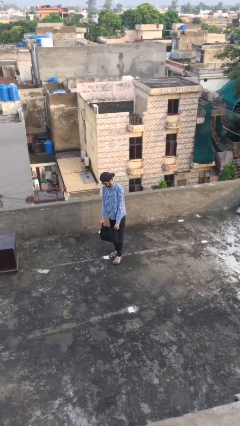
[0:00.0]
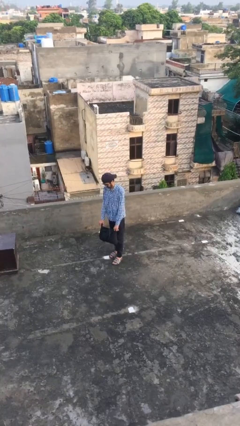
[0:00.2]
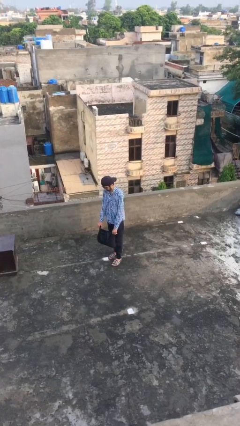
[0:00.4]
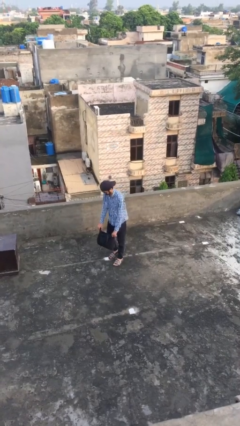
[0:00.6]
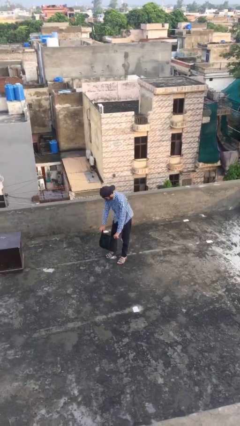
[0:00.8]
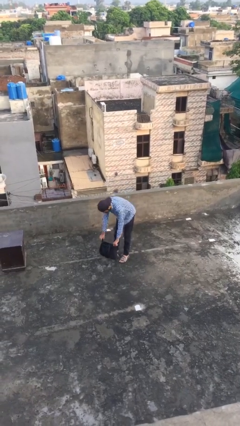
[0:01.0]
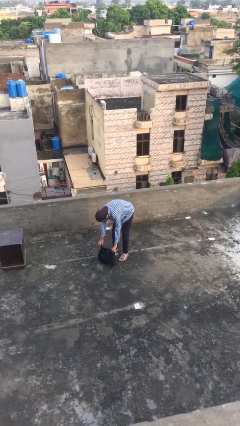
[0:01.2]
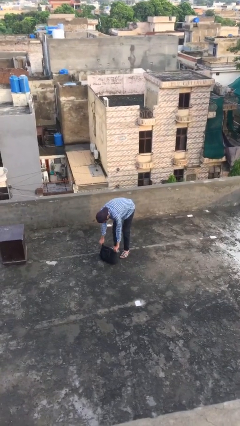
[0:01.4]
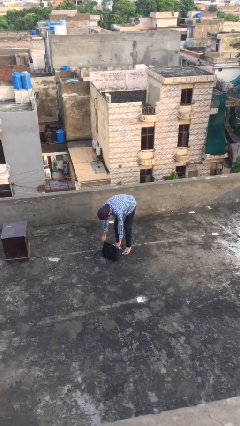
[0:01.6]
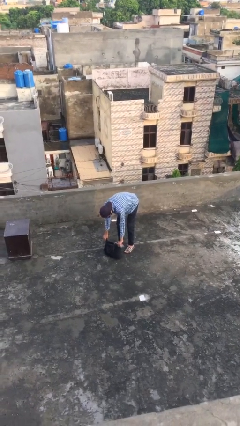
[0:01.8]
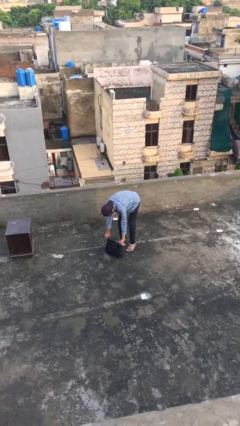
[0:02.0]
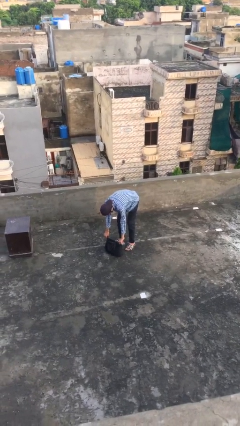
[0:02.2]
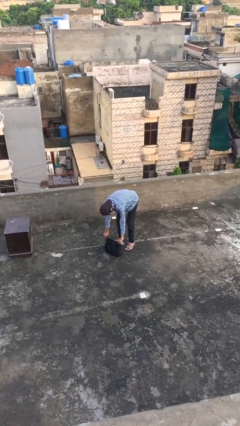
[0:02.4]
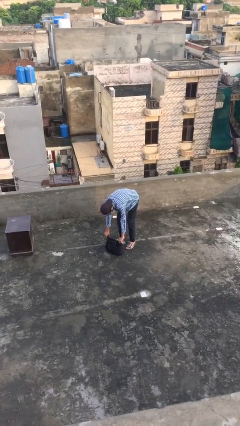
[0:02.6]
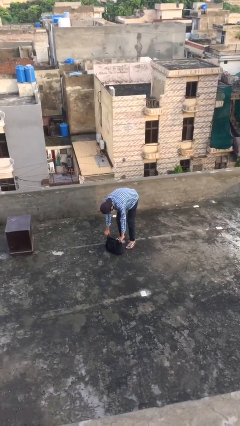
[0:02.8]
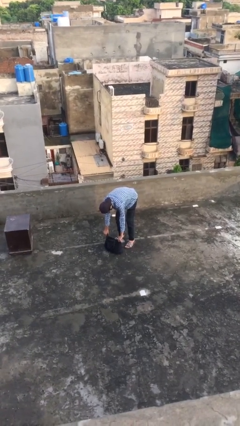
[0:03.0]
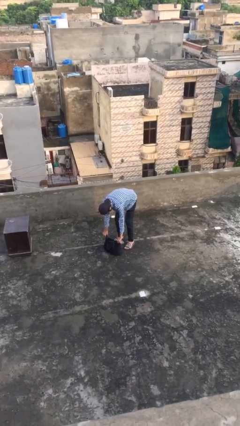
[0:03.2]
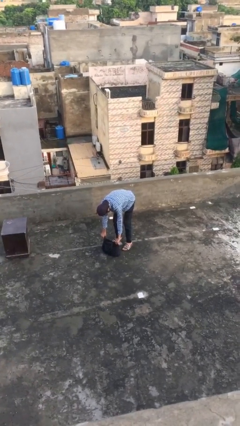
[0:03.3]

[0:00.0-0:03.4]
person puts down object on floor

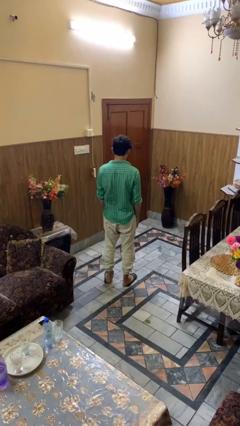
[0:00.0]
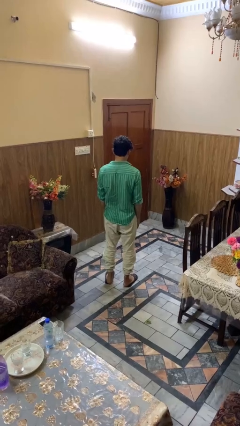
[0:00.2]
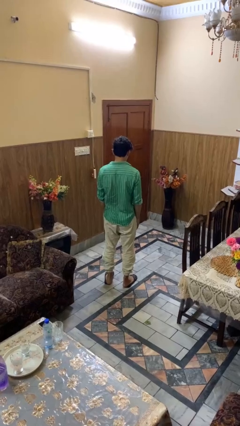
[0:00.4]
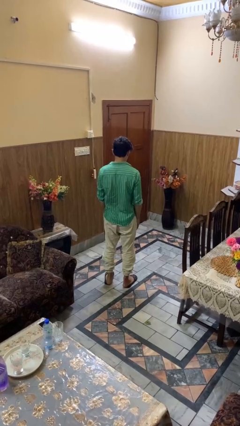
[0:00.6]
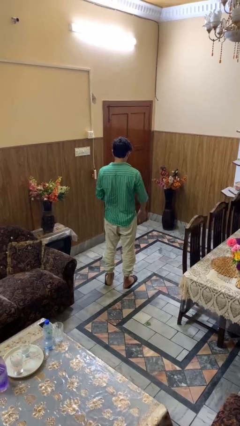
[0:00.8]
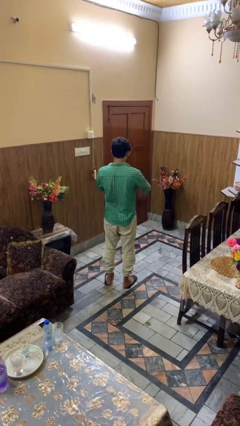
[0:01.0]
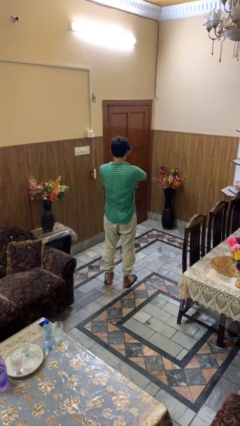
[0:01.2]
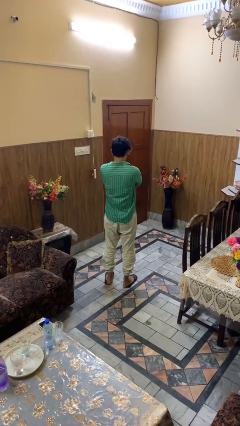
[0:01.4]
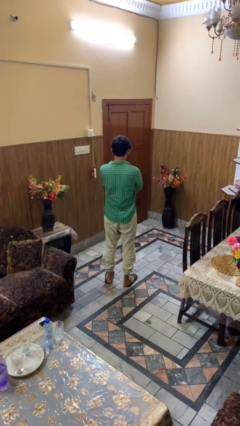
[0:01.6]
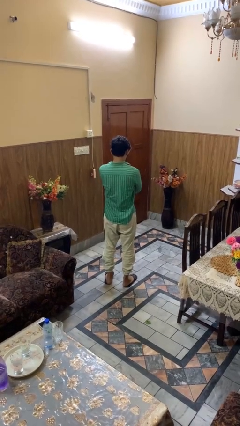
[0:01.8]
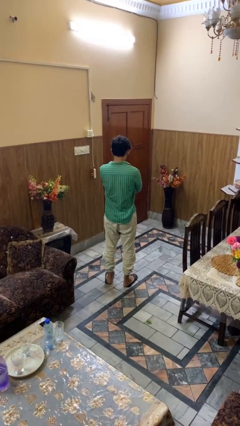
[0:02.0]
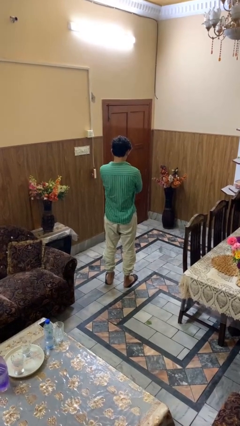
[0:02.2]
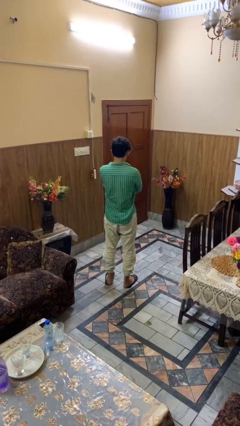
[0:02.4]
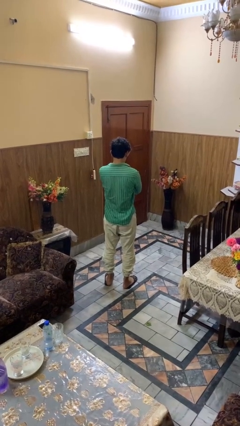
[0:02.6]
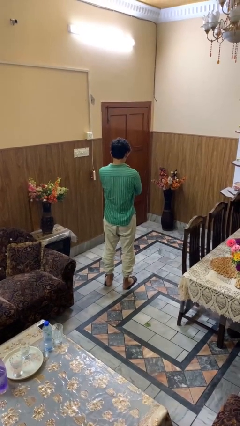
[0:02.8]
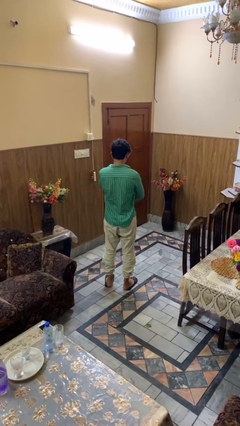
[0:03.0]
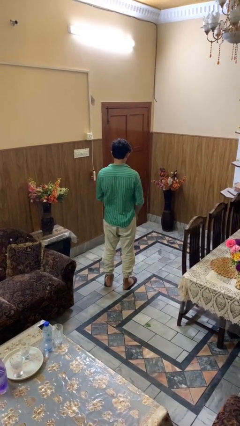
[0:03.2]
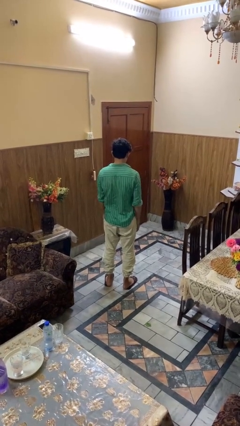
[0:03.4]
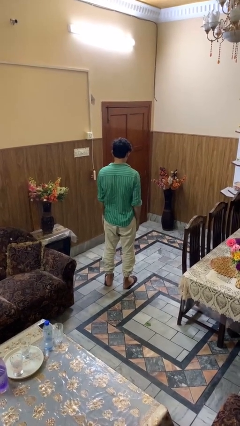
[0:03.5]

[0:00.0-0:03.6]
person crosses arms

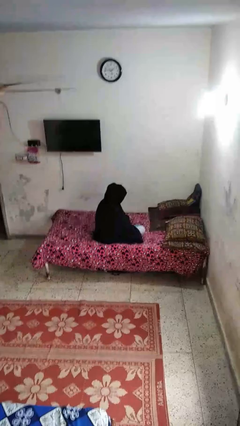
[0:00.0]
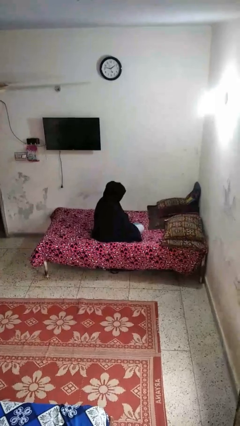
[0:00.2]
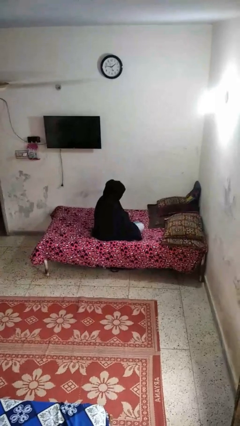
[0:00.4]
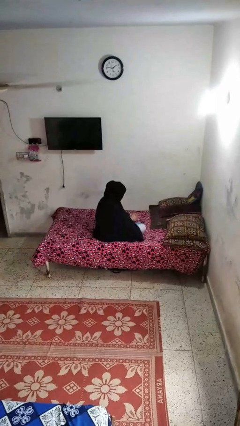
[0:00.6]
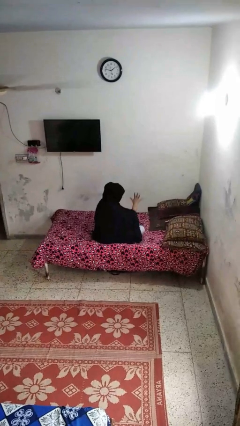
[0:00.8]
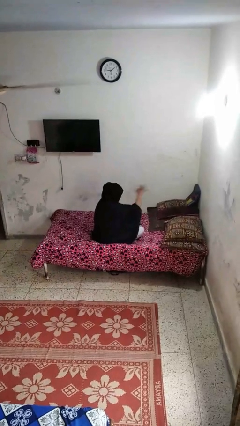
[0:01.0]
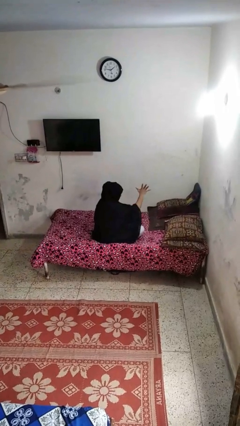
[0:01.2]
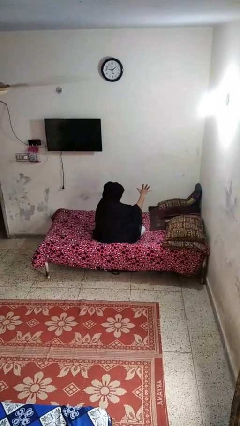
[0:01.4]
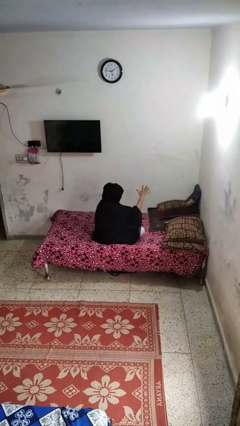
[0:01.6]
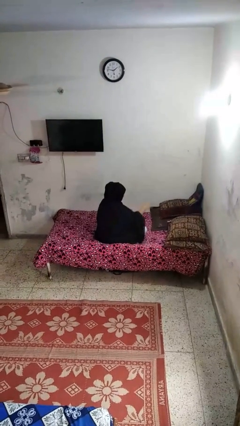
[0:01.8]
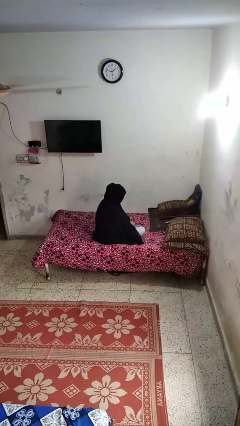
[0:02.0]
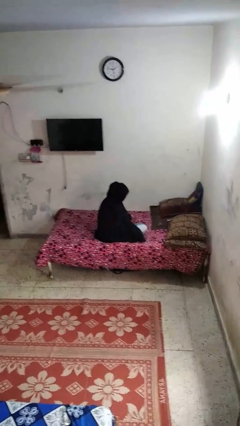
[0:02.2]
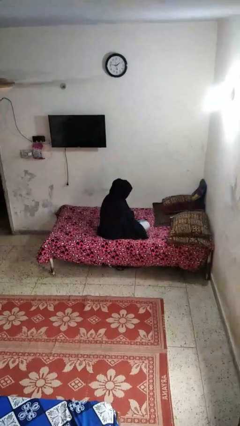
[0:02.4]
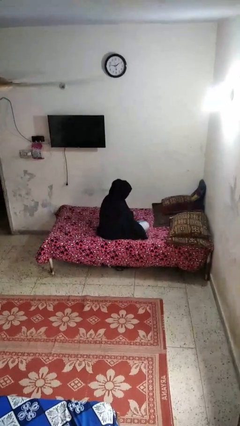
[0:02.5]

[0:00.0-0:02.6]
person gestures number five

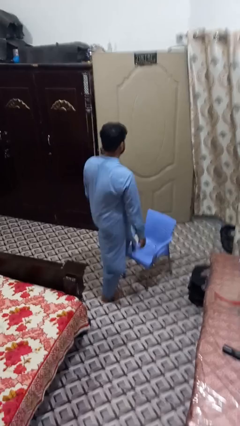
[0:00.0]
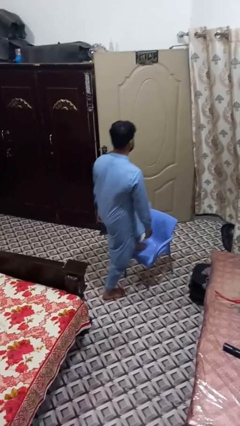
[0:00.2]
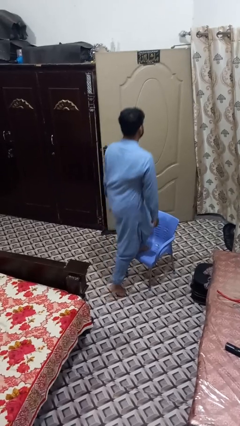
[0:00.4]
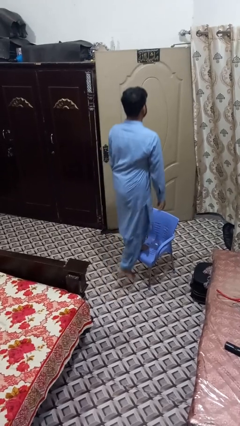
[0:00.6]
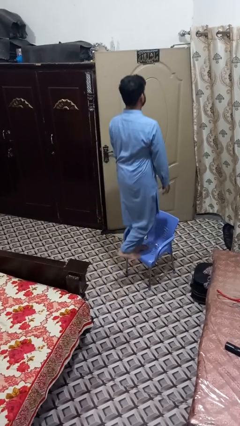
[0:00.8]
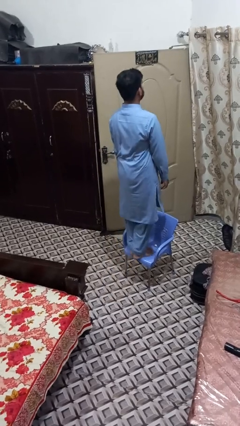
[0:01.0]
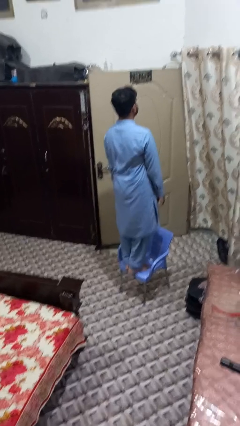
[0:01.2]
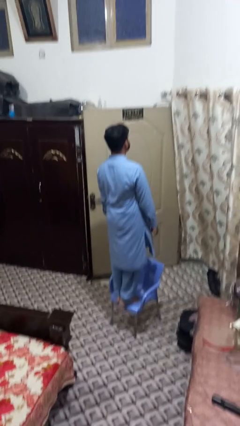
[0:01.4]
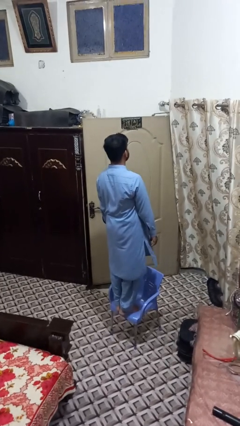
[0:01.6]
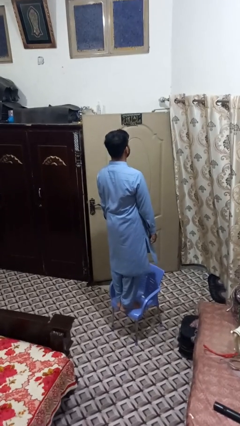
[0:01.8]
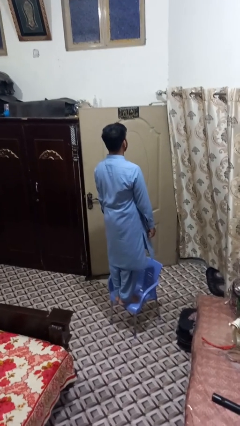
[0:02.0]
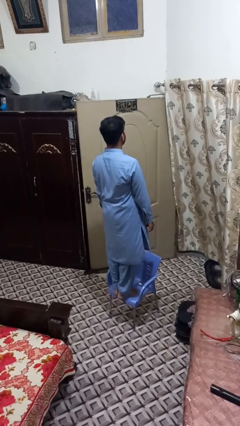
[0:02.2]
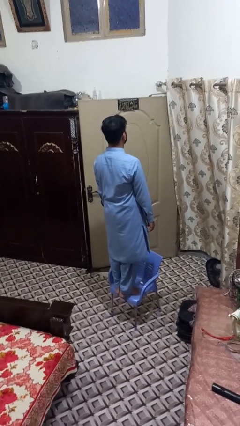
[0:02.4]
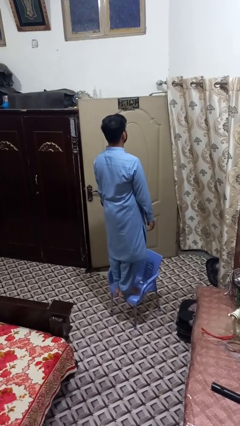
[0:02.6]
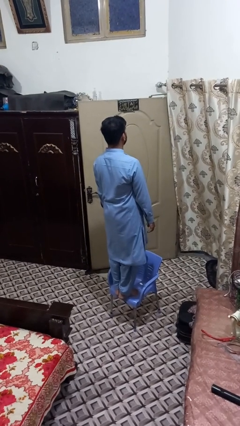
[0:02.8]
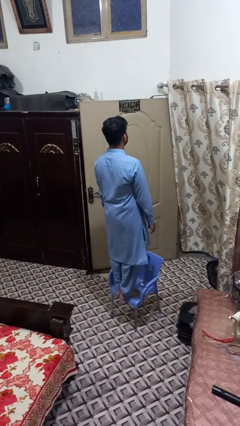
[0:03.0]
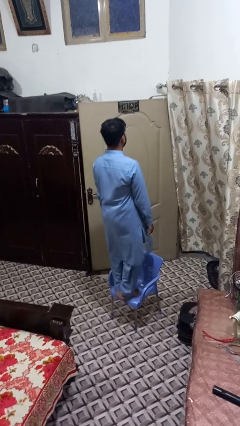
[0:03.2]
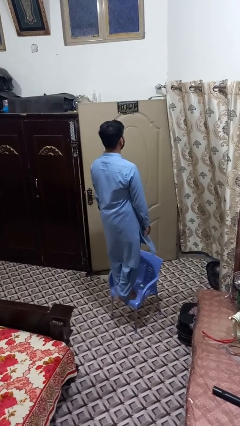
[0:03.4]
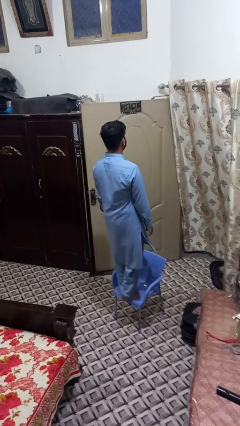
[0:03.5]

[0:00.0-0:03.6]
person climbs on chair

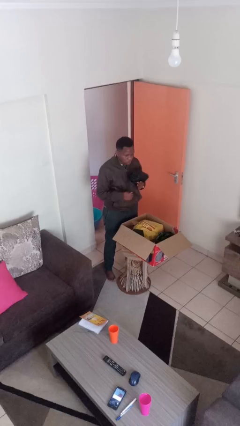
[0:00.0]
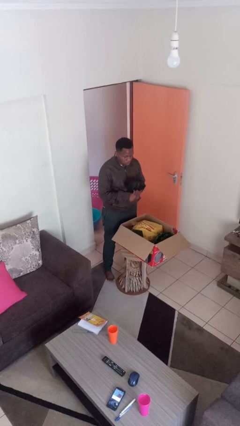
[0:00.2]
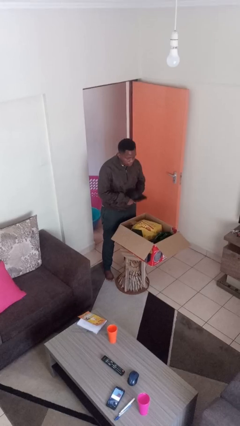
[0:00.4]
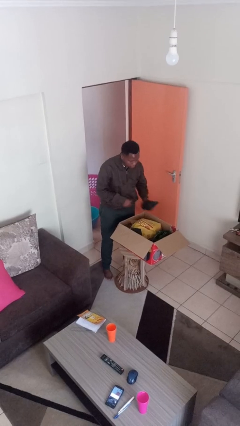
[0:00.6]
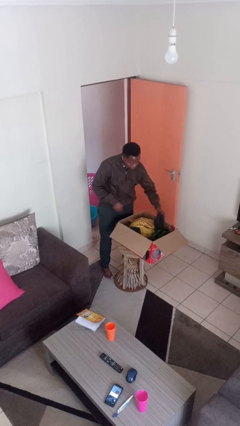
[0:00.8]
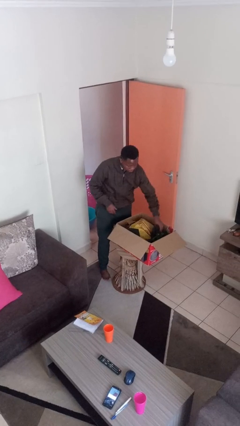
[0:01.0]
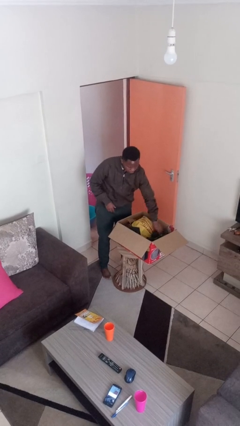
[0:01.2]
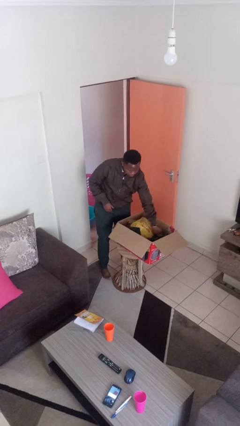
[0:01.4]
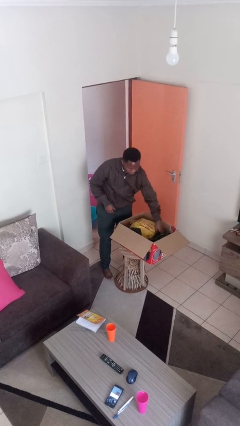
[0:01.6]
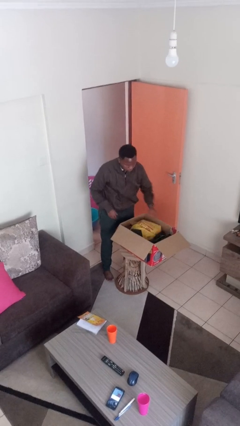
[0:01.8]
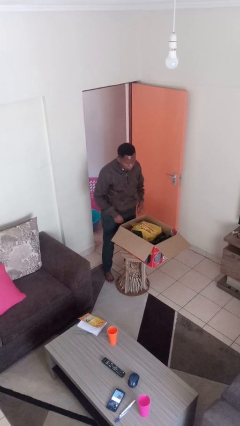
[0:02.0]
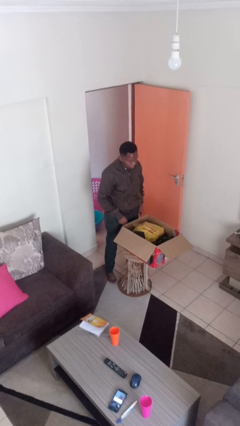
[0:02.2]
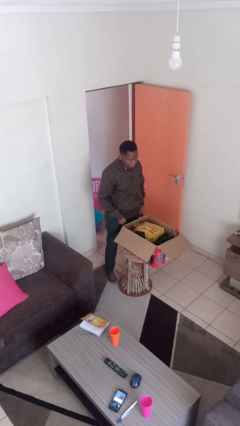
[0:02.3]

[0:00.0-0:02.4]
person puts object into box

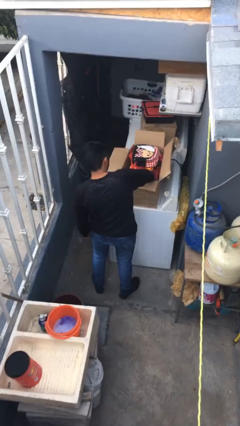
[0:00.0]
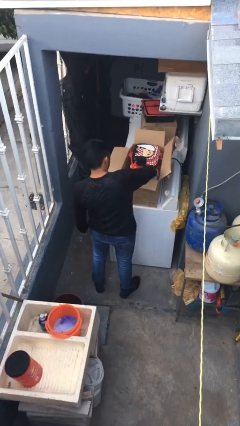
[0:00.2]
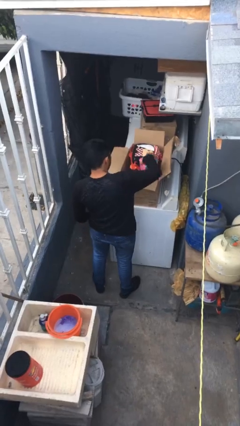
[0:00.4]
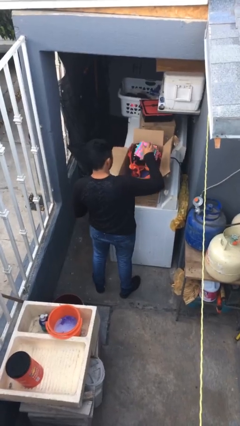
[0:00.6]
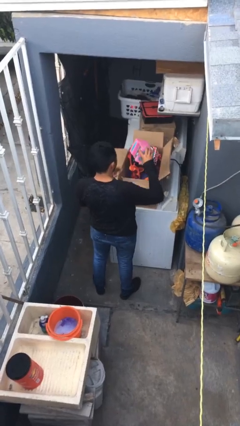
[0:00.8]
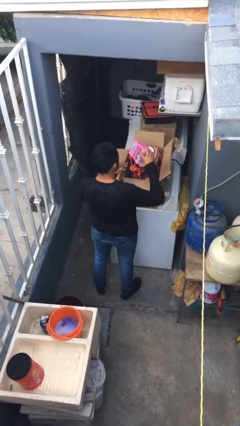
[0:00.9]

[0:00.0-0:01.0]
person takes object from box

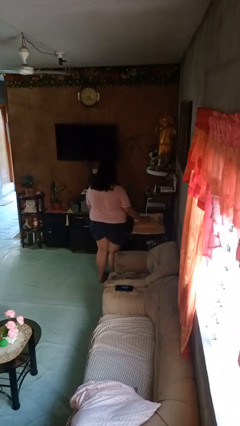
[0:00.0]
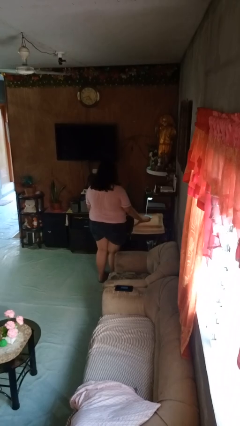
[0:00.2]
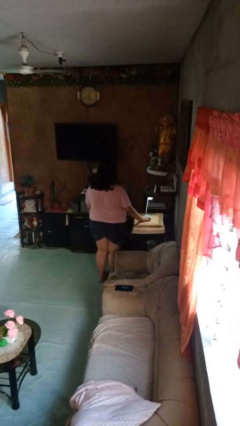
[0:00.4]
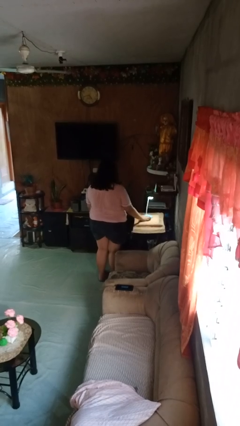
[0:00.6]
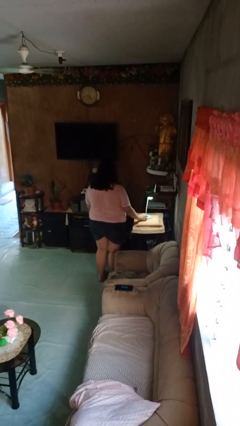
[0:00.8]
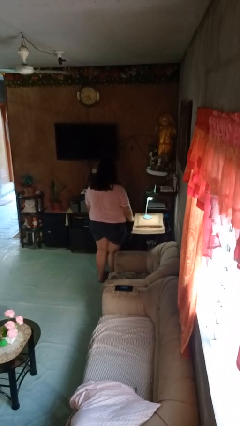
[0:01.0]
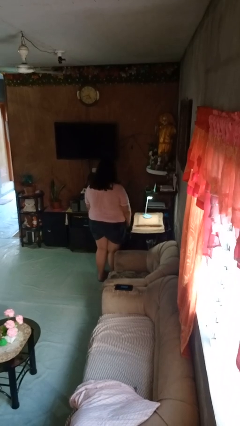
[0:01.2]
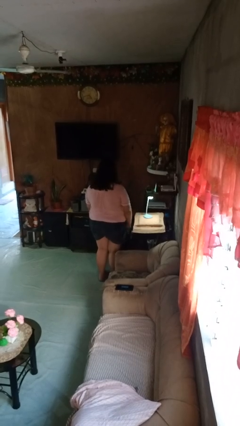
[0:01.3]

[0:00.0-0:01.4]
person turns on lamp
